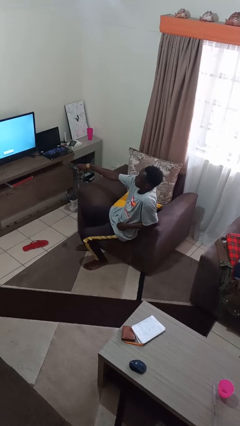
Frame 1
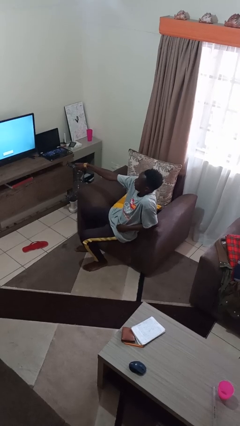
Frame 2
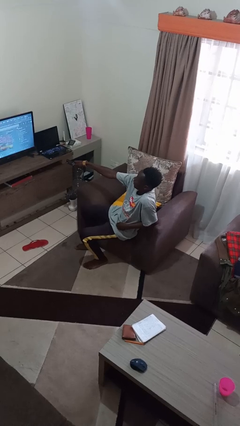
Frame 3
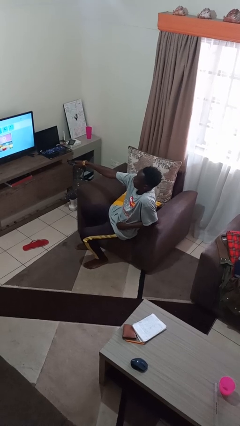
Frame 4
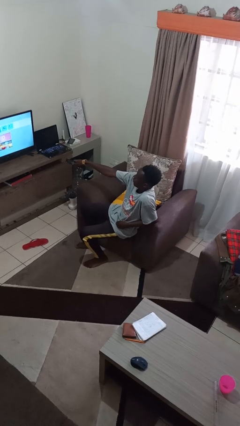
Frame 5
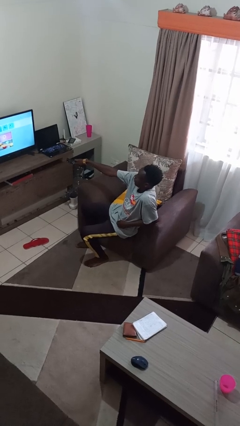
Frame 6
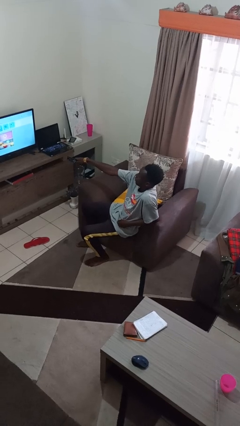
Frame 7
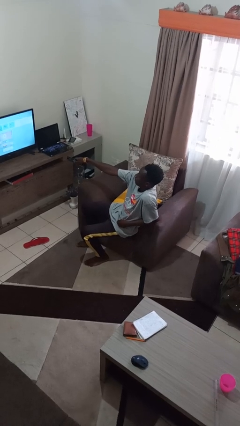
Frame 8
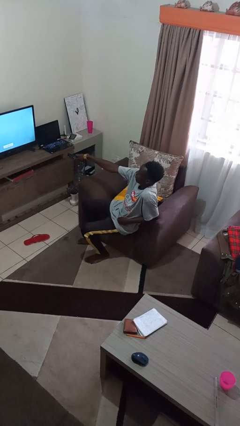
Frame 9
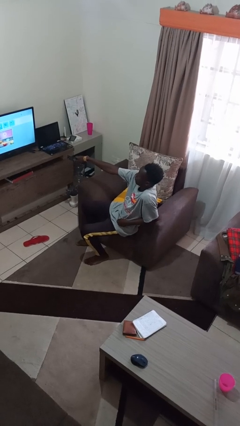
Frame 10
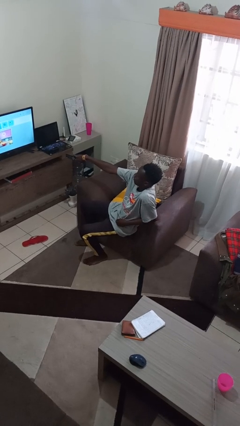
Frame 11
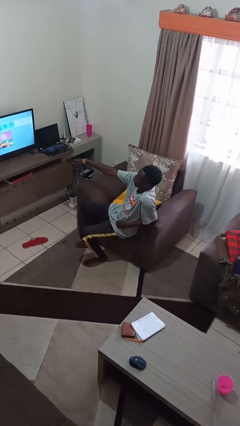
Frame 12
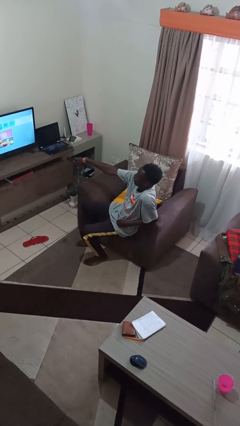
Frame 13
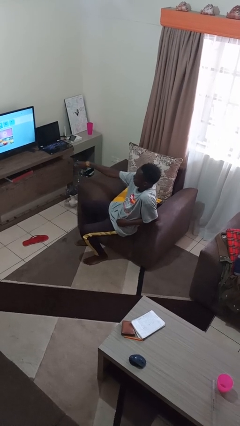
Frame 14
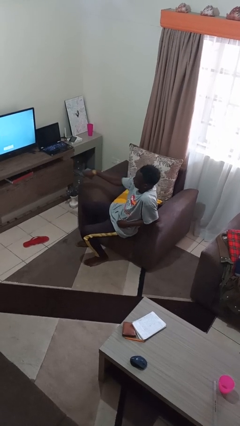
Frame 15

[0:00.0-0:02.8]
person uses television remote

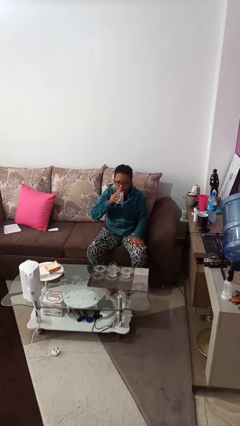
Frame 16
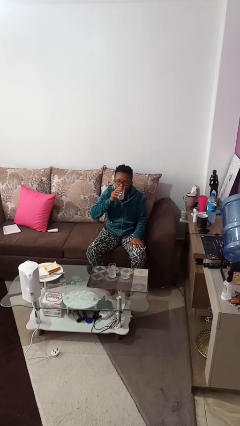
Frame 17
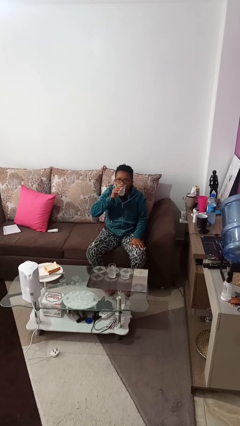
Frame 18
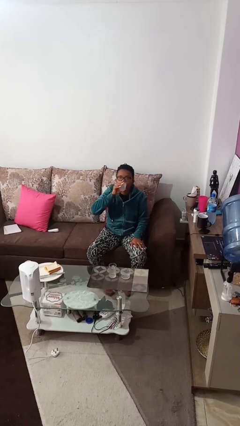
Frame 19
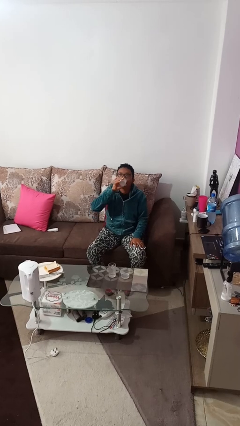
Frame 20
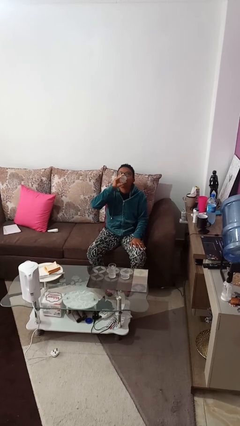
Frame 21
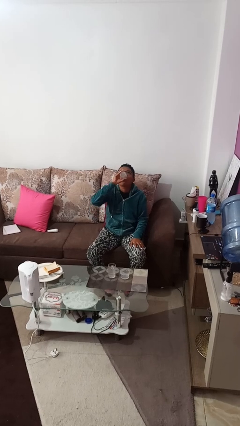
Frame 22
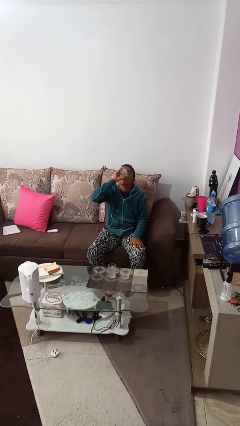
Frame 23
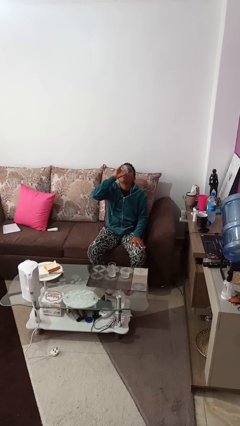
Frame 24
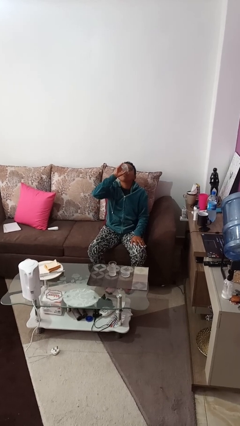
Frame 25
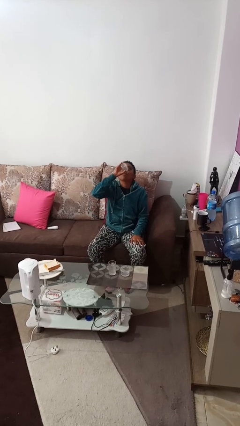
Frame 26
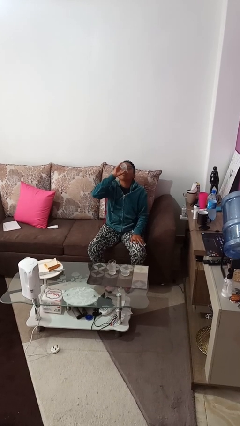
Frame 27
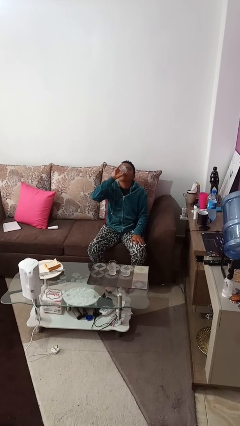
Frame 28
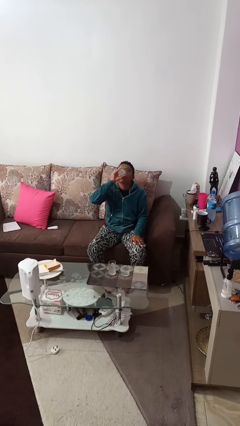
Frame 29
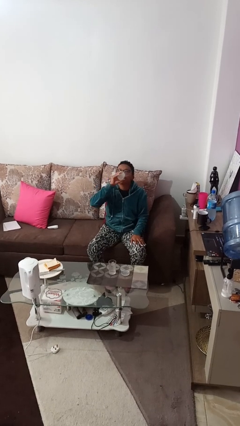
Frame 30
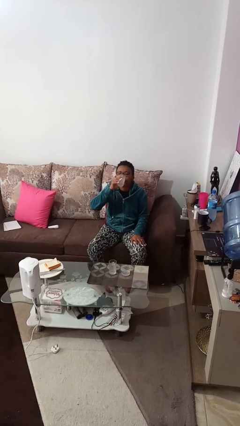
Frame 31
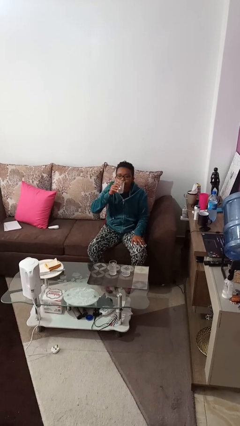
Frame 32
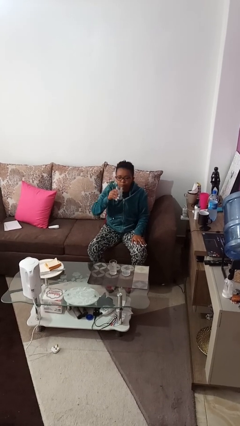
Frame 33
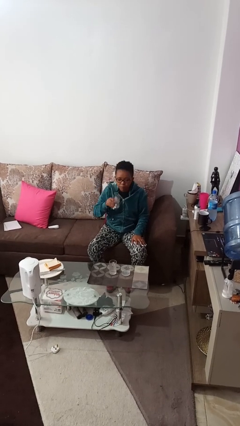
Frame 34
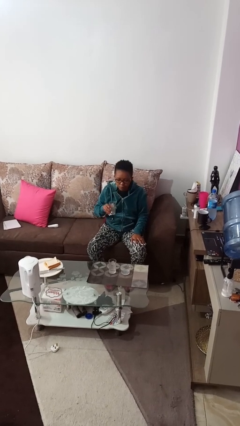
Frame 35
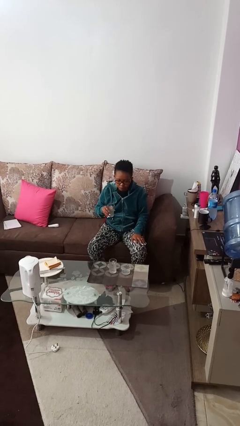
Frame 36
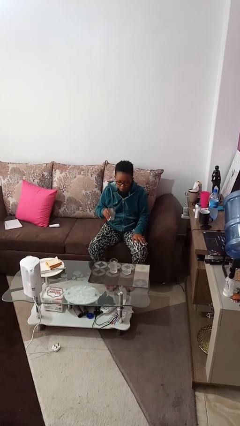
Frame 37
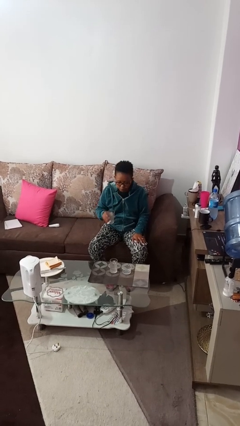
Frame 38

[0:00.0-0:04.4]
person drinks from shotglass

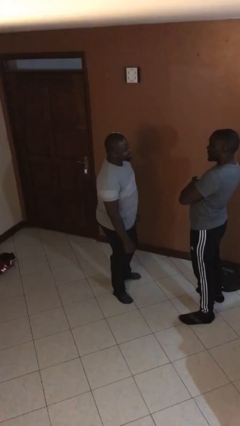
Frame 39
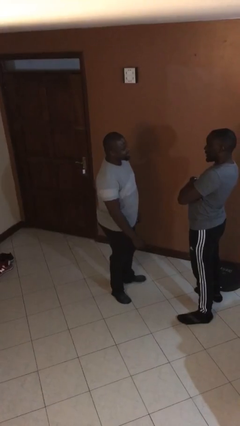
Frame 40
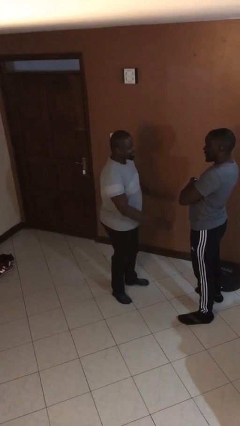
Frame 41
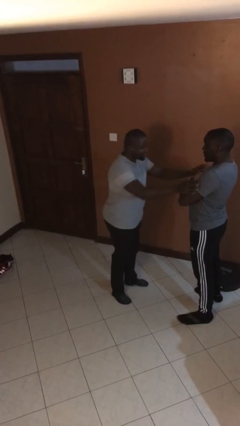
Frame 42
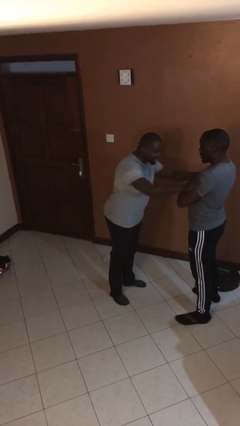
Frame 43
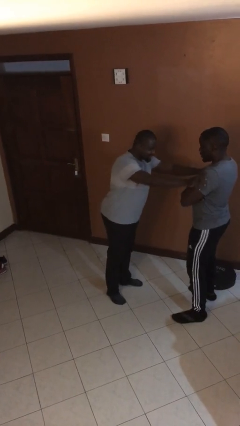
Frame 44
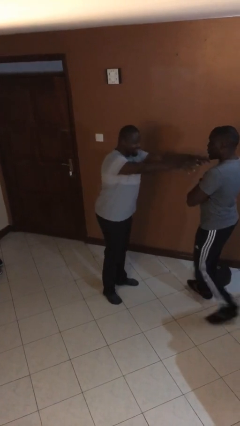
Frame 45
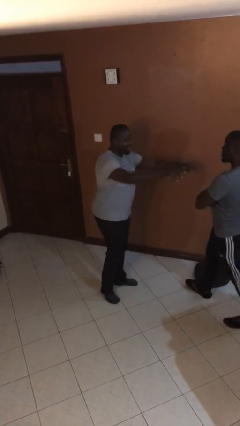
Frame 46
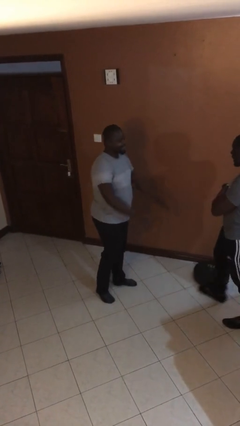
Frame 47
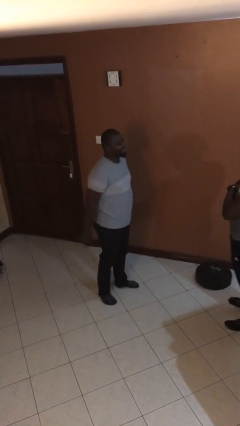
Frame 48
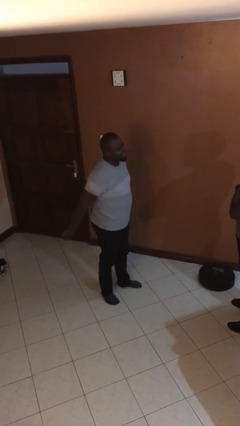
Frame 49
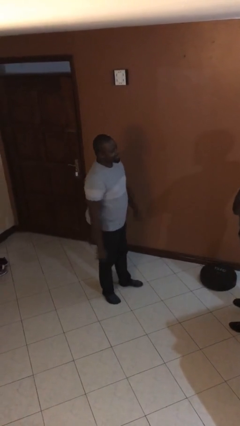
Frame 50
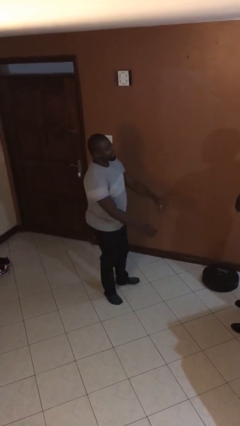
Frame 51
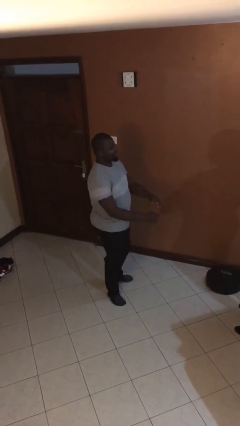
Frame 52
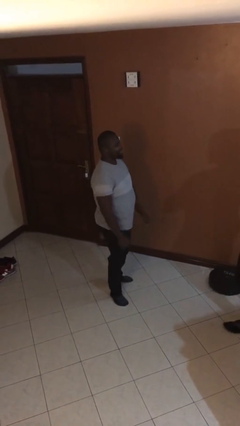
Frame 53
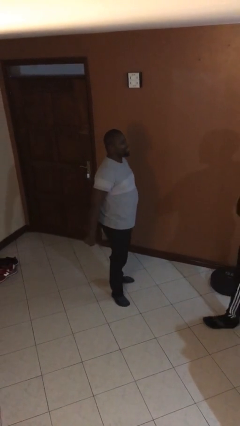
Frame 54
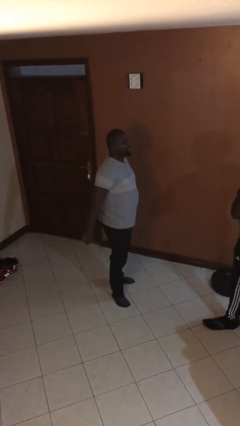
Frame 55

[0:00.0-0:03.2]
person shoves person

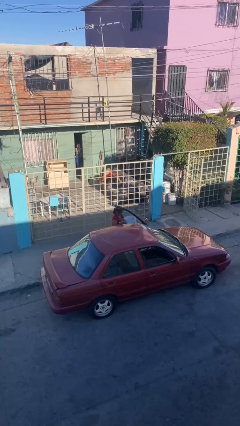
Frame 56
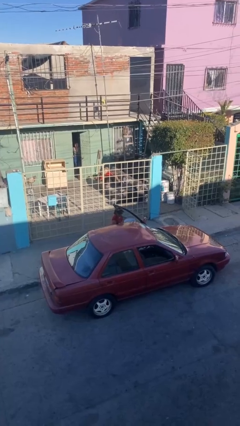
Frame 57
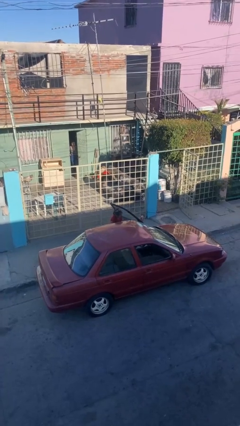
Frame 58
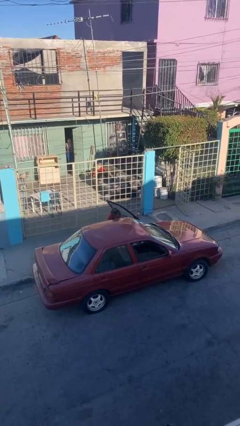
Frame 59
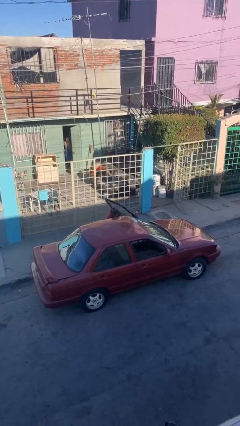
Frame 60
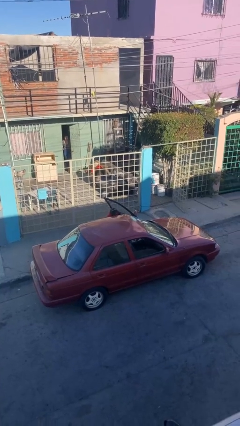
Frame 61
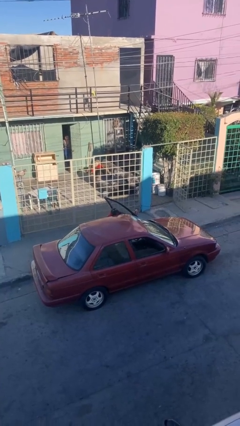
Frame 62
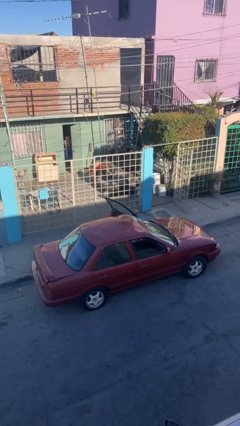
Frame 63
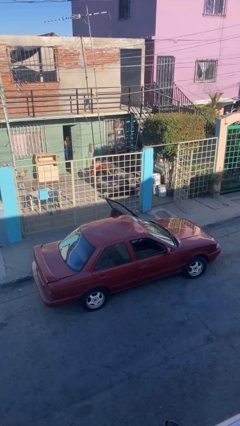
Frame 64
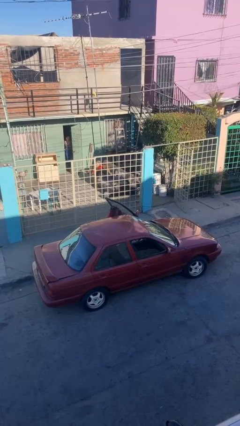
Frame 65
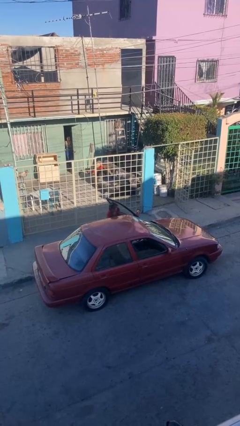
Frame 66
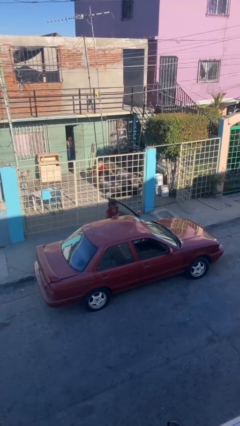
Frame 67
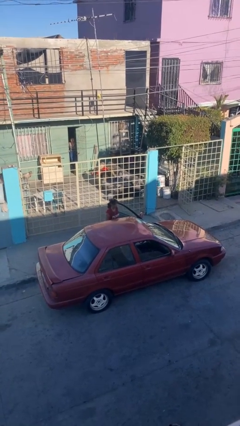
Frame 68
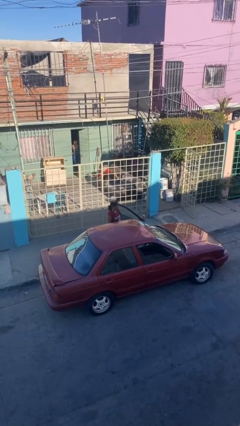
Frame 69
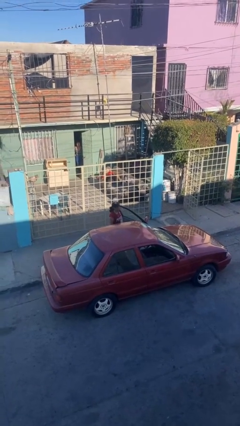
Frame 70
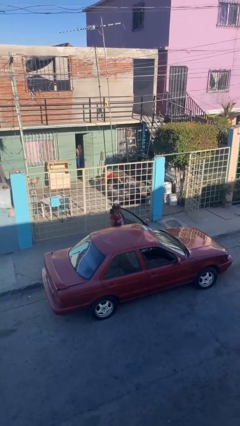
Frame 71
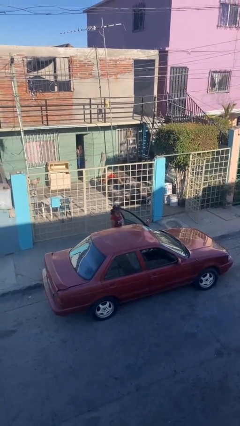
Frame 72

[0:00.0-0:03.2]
person loads car

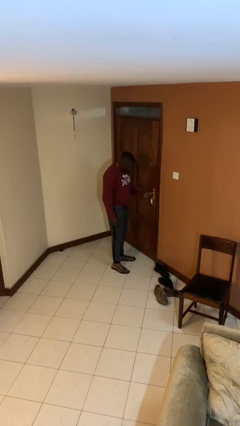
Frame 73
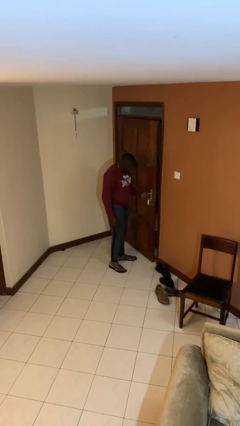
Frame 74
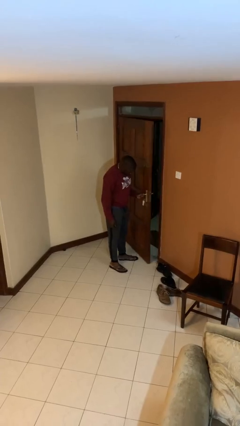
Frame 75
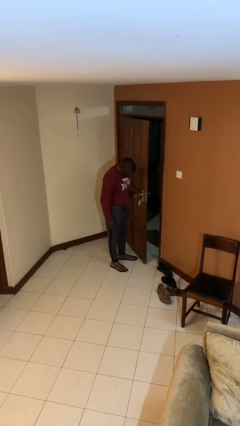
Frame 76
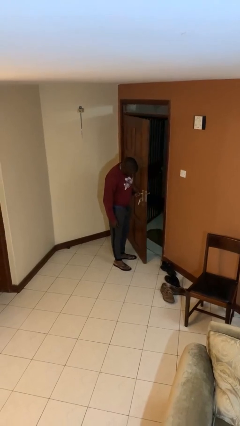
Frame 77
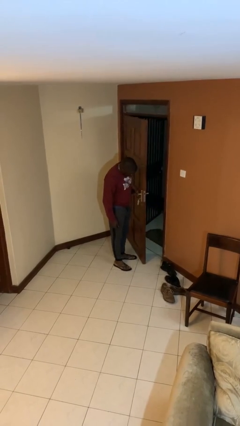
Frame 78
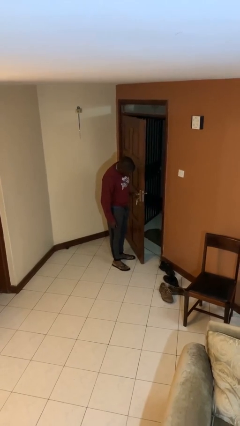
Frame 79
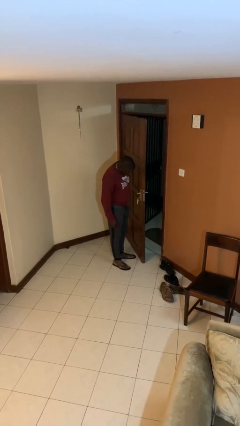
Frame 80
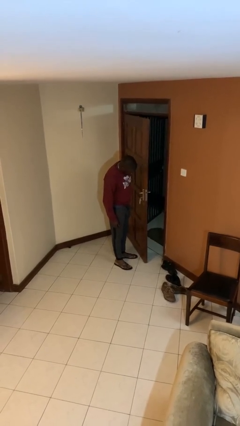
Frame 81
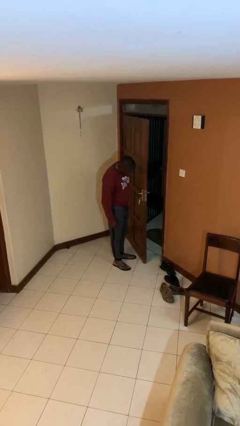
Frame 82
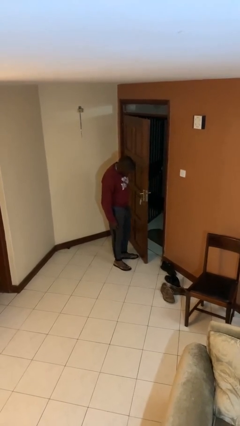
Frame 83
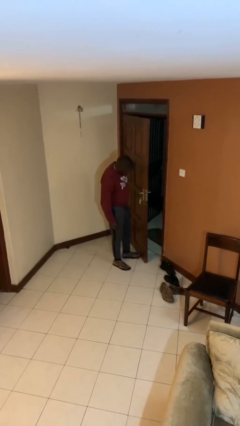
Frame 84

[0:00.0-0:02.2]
person opens facility door

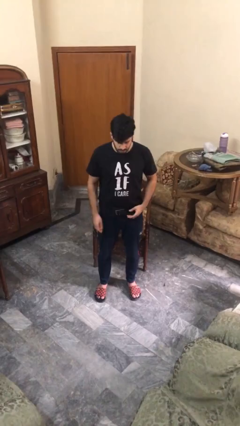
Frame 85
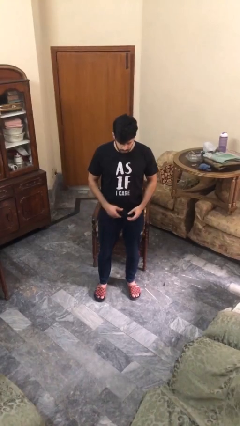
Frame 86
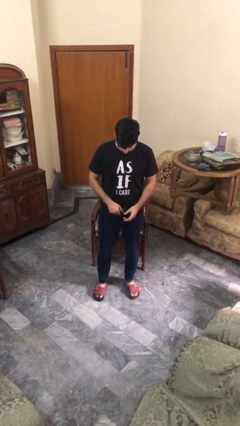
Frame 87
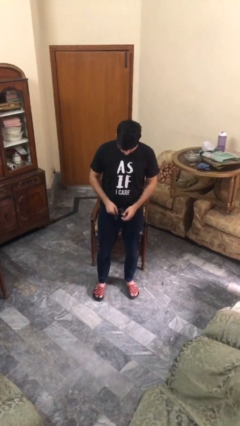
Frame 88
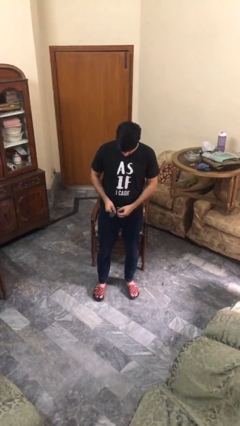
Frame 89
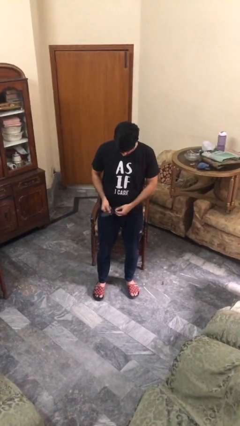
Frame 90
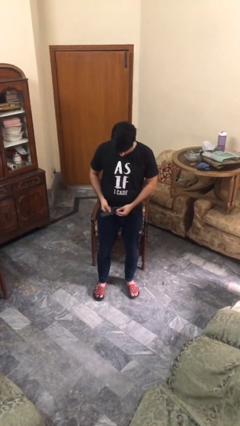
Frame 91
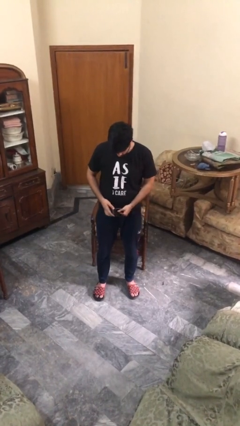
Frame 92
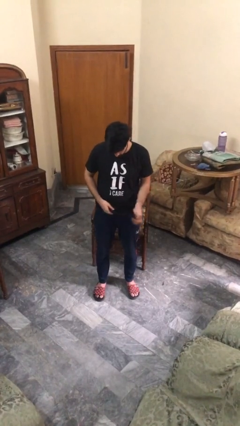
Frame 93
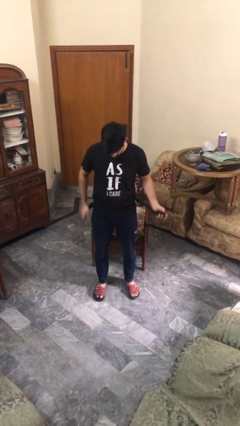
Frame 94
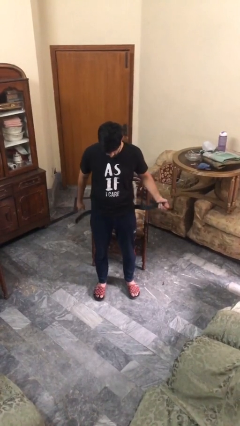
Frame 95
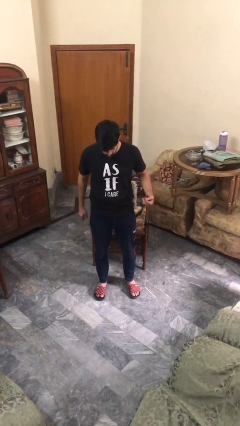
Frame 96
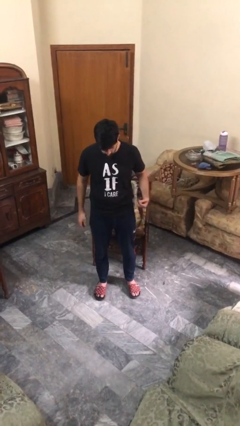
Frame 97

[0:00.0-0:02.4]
person takes off belt
